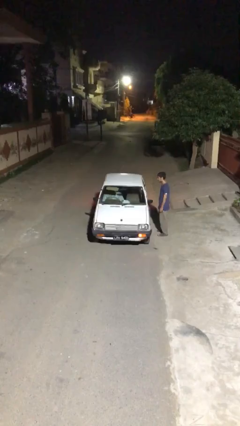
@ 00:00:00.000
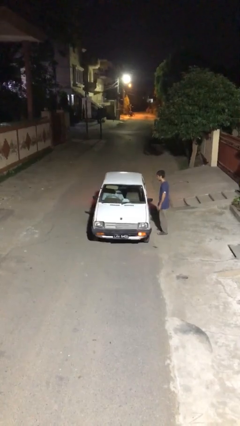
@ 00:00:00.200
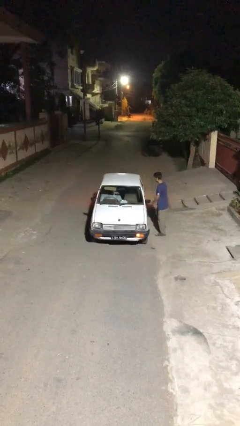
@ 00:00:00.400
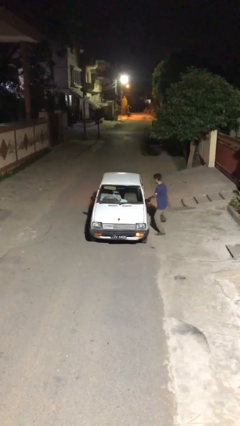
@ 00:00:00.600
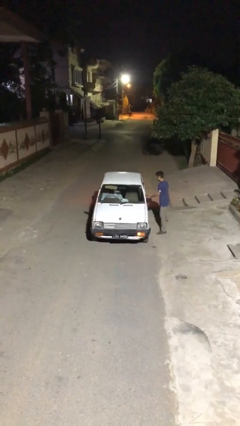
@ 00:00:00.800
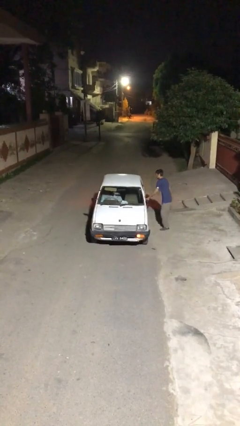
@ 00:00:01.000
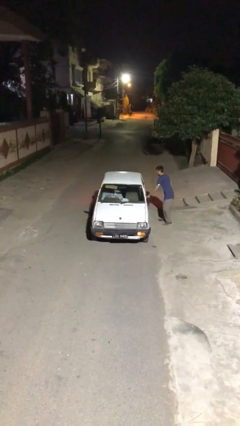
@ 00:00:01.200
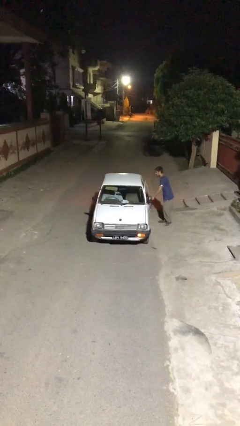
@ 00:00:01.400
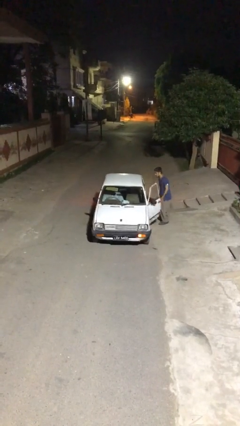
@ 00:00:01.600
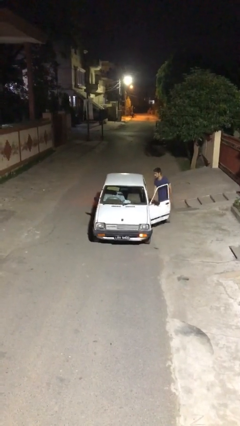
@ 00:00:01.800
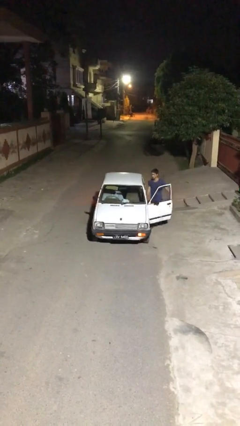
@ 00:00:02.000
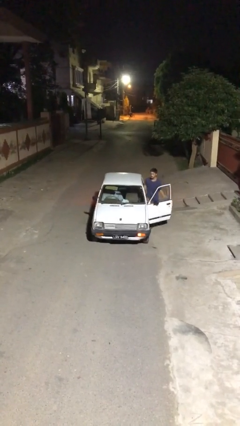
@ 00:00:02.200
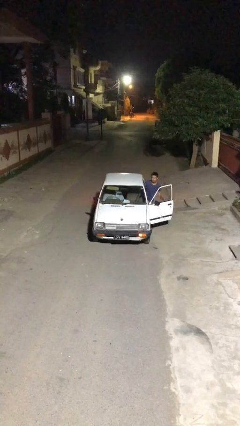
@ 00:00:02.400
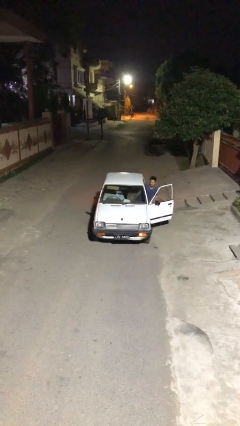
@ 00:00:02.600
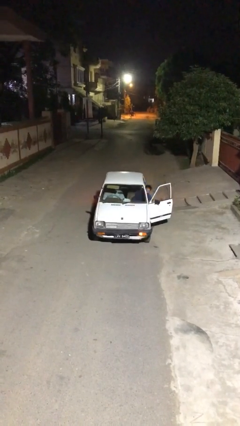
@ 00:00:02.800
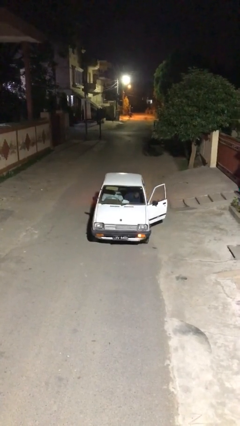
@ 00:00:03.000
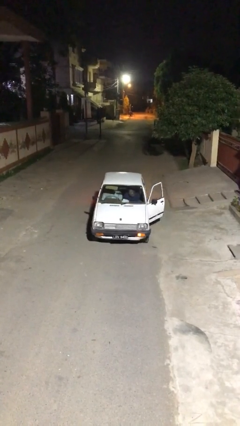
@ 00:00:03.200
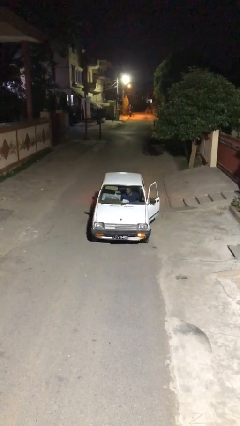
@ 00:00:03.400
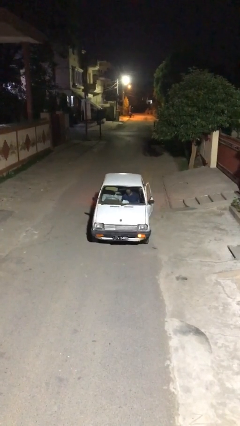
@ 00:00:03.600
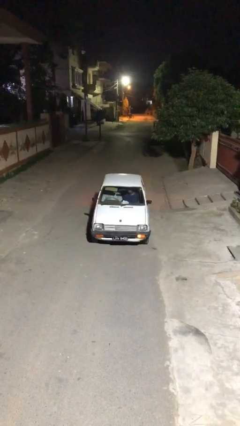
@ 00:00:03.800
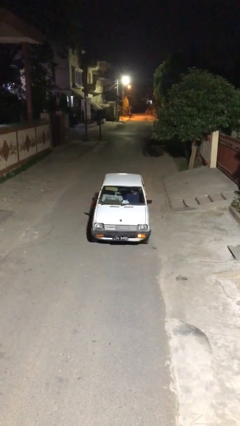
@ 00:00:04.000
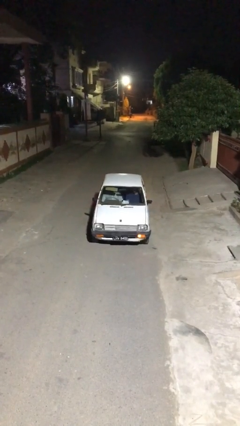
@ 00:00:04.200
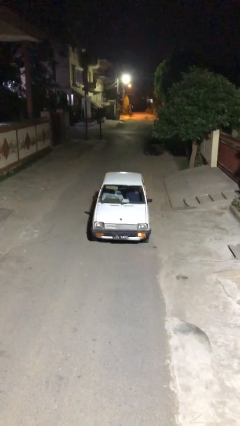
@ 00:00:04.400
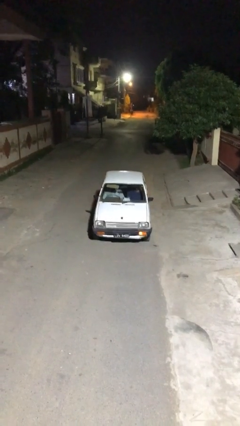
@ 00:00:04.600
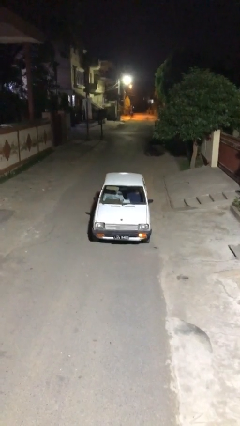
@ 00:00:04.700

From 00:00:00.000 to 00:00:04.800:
car picks up person

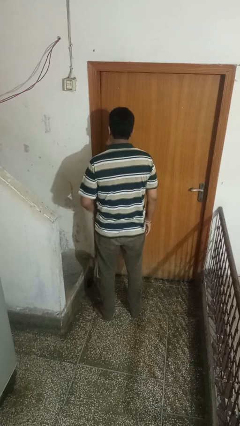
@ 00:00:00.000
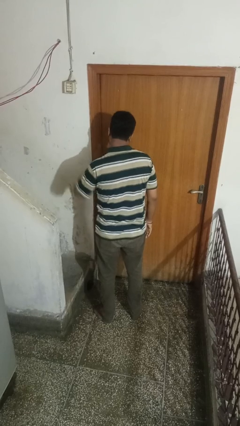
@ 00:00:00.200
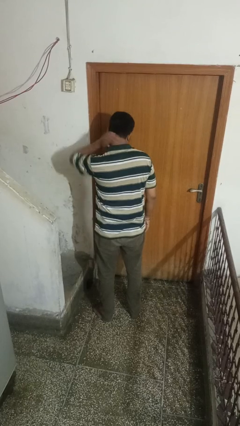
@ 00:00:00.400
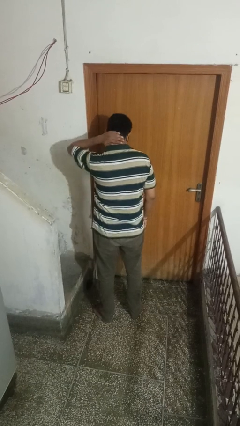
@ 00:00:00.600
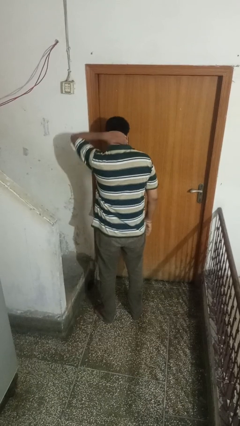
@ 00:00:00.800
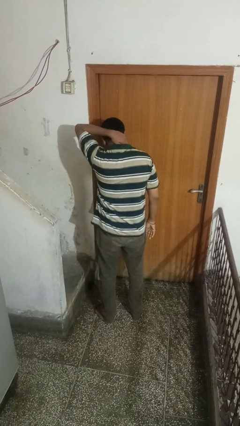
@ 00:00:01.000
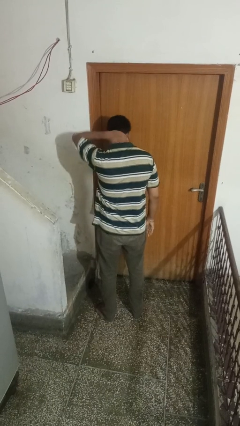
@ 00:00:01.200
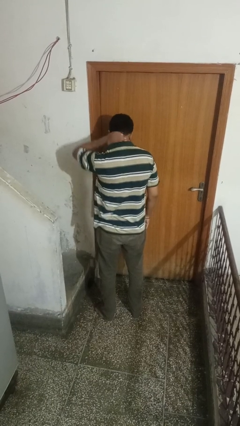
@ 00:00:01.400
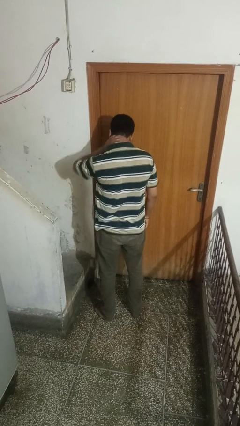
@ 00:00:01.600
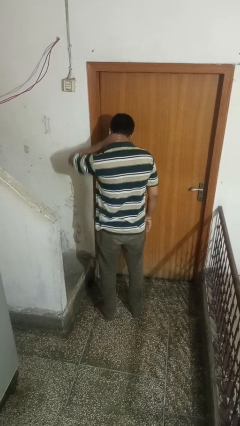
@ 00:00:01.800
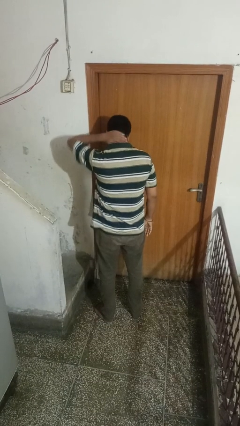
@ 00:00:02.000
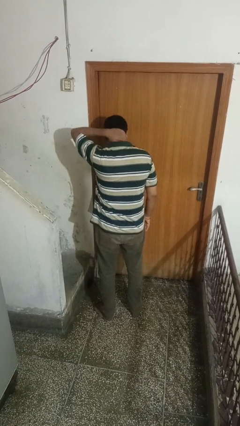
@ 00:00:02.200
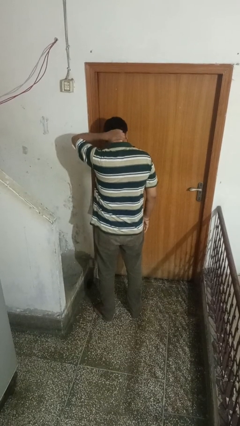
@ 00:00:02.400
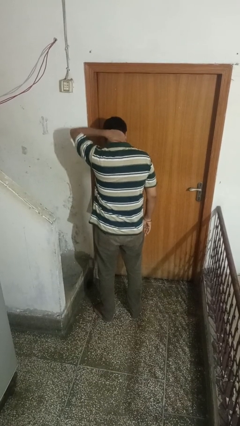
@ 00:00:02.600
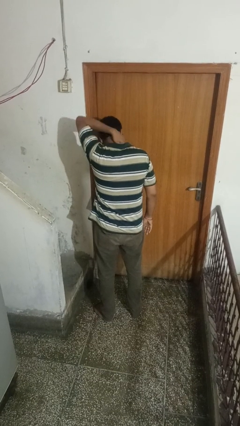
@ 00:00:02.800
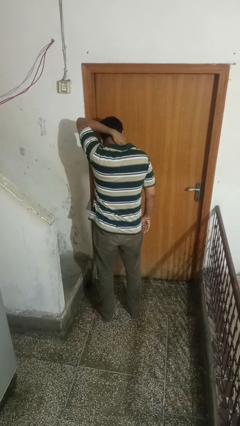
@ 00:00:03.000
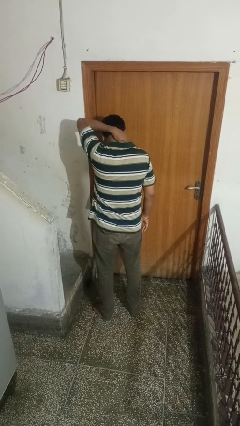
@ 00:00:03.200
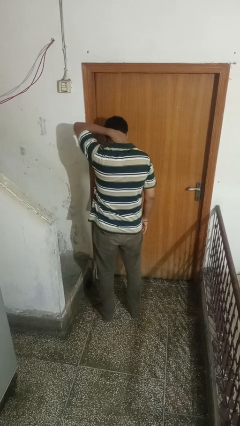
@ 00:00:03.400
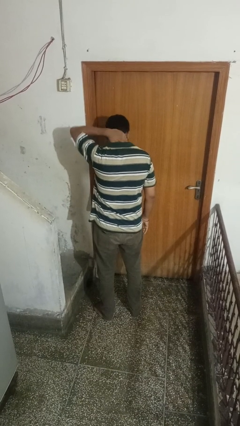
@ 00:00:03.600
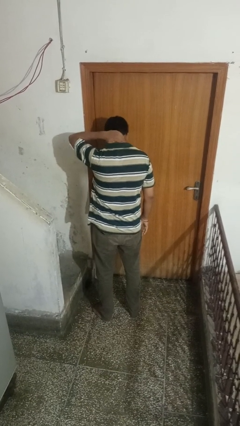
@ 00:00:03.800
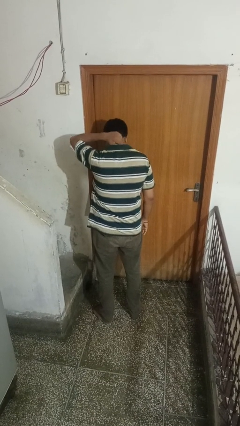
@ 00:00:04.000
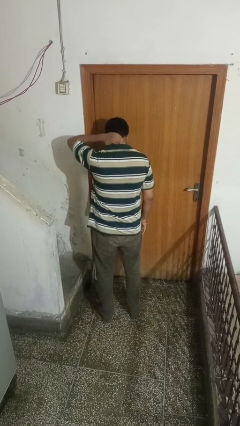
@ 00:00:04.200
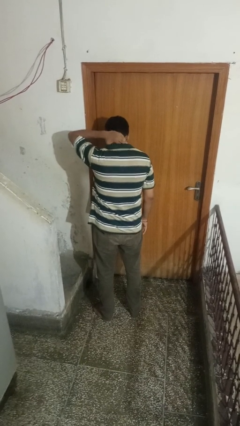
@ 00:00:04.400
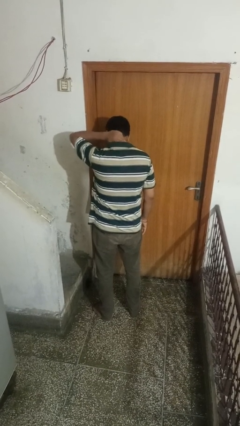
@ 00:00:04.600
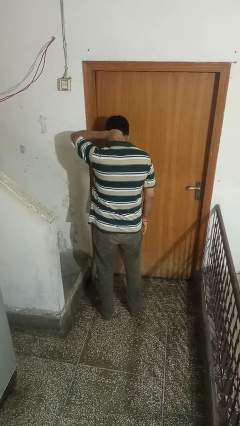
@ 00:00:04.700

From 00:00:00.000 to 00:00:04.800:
person rubs neck

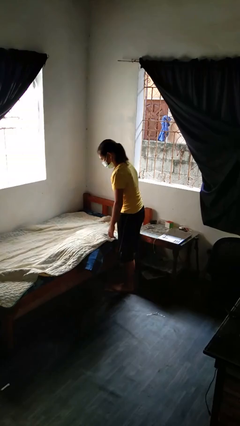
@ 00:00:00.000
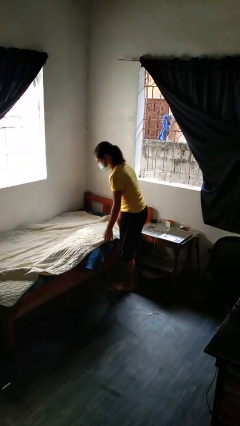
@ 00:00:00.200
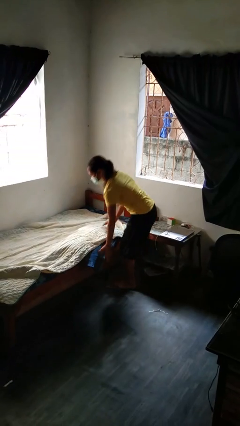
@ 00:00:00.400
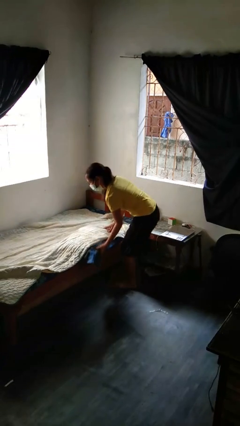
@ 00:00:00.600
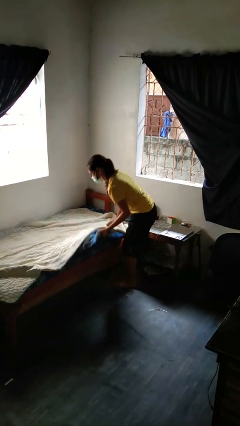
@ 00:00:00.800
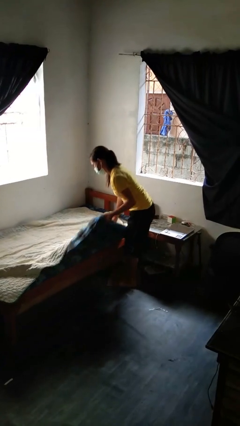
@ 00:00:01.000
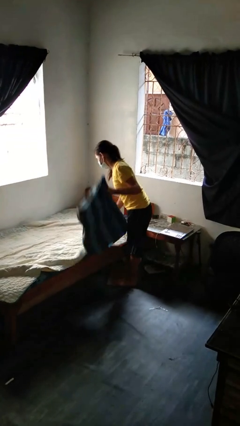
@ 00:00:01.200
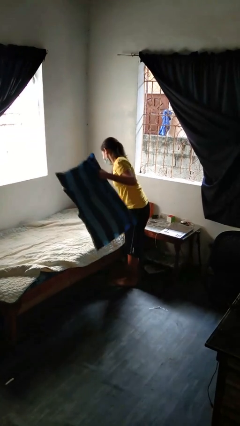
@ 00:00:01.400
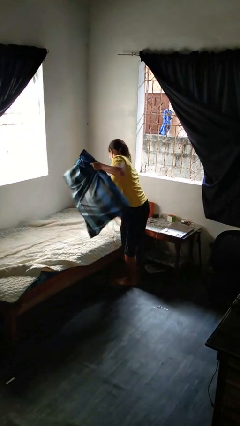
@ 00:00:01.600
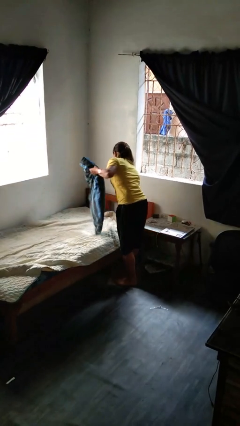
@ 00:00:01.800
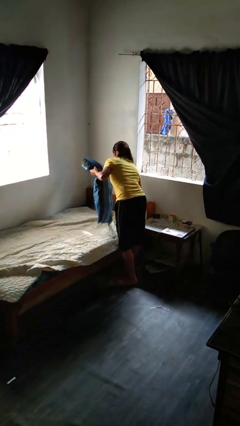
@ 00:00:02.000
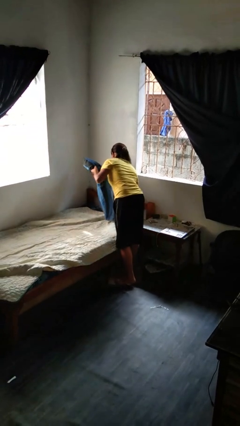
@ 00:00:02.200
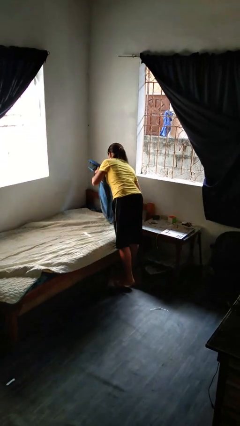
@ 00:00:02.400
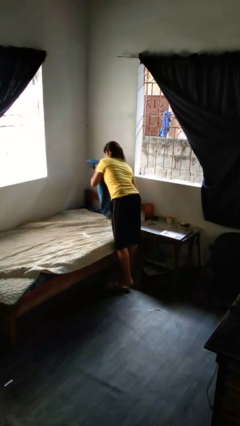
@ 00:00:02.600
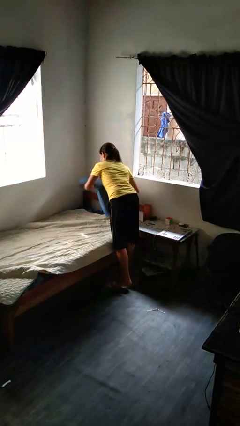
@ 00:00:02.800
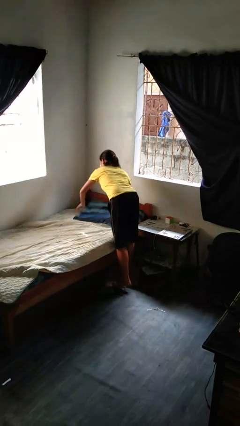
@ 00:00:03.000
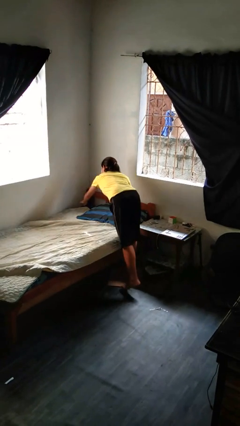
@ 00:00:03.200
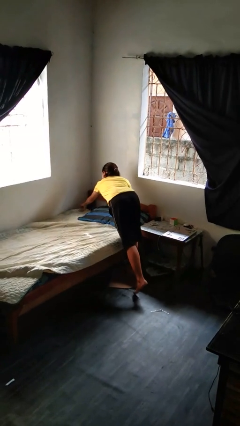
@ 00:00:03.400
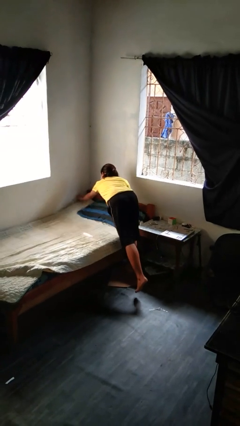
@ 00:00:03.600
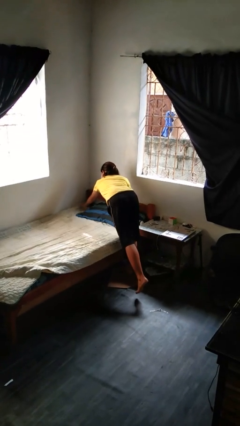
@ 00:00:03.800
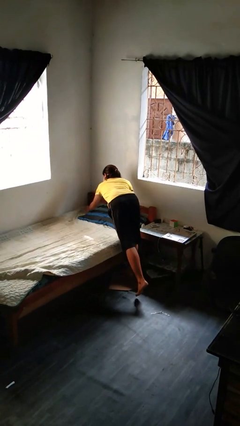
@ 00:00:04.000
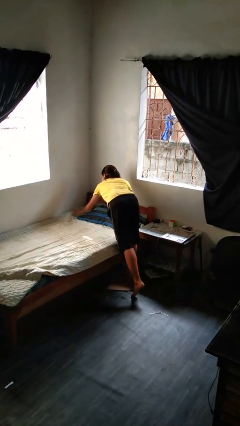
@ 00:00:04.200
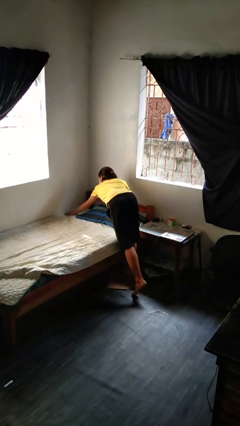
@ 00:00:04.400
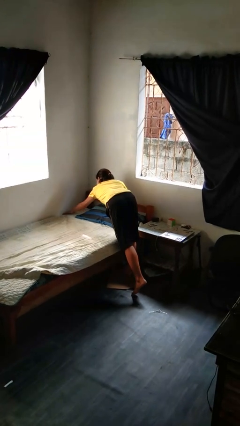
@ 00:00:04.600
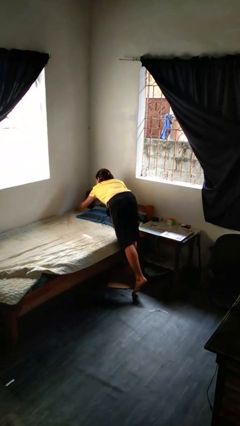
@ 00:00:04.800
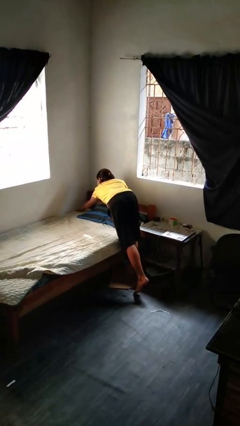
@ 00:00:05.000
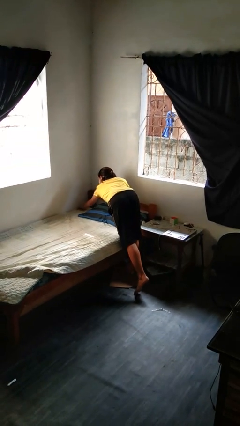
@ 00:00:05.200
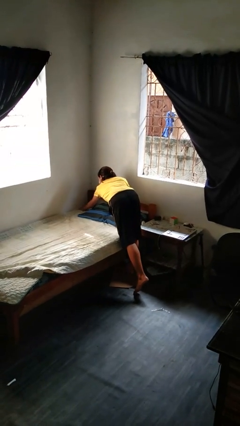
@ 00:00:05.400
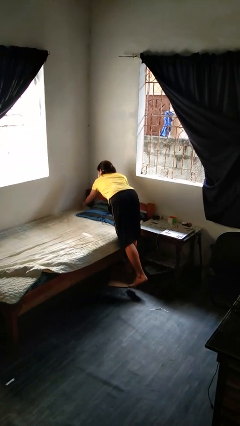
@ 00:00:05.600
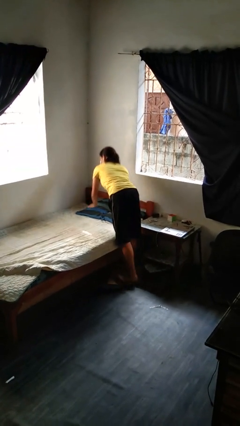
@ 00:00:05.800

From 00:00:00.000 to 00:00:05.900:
person makes bed

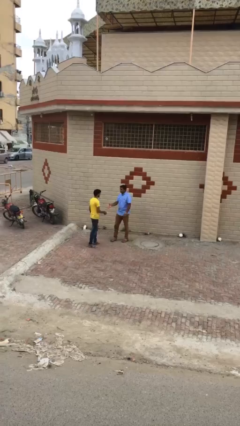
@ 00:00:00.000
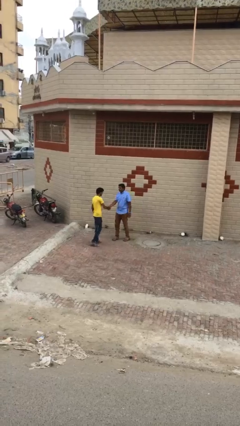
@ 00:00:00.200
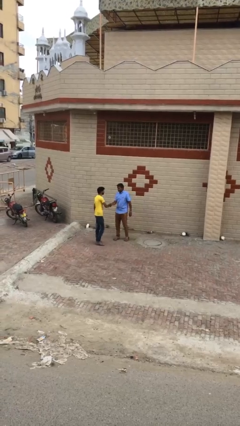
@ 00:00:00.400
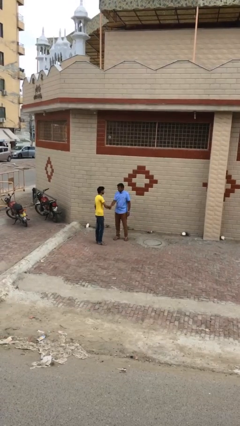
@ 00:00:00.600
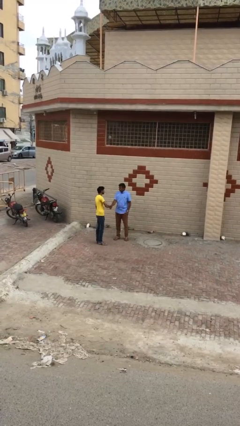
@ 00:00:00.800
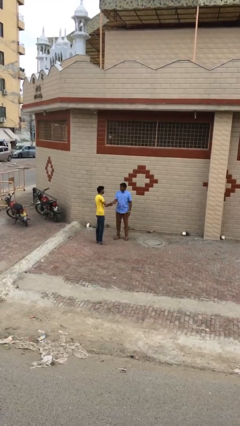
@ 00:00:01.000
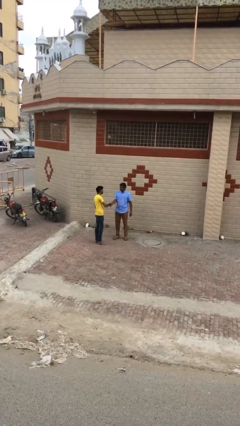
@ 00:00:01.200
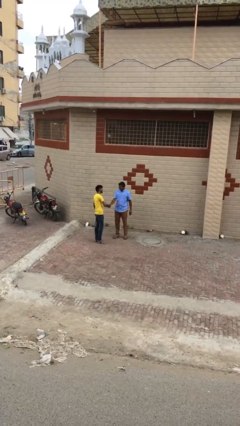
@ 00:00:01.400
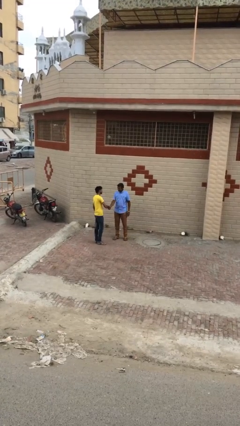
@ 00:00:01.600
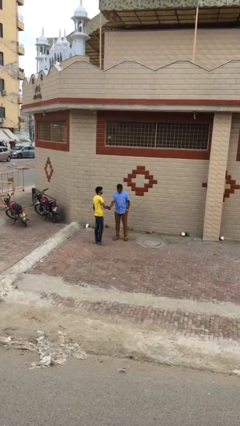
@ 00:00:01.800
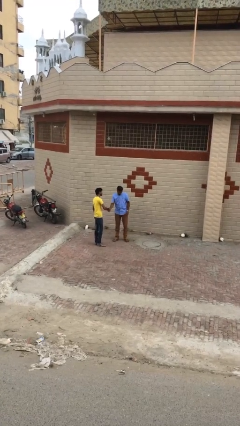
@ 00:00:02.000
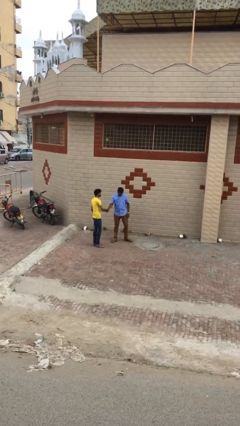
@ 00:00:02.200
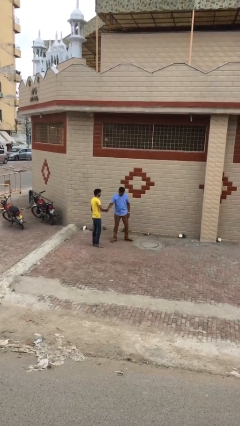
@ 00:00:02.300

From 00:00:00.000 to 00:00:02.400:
person shakes hand
